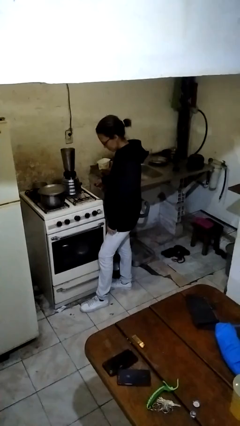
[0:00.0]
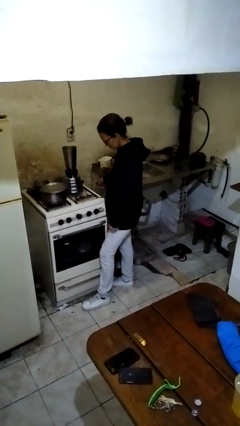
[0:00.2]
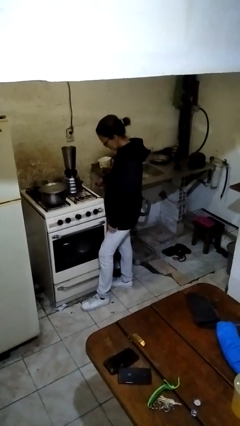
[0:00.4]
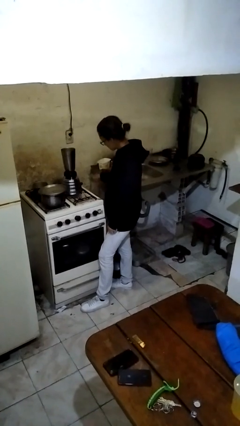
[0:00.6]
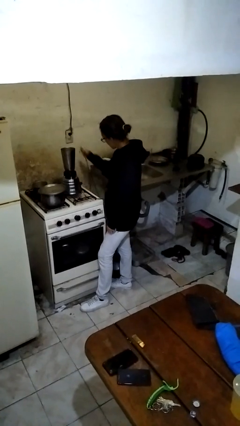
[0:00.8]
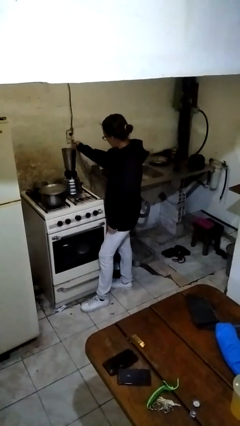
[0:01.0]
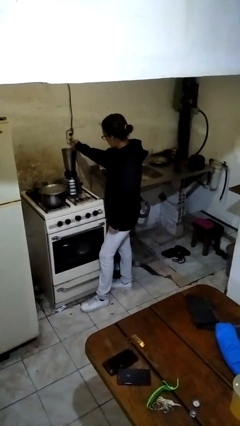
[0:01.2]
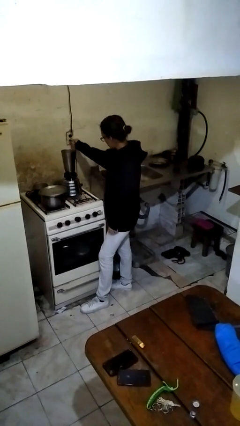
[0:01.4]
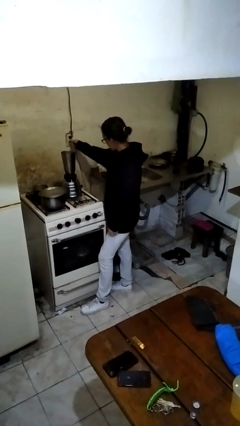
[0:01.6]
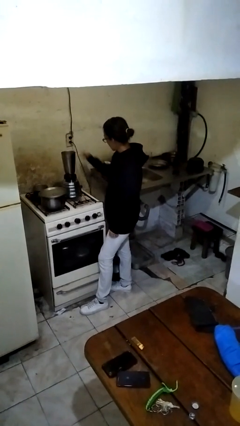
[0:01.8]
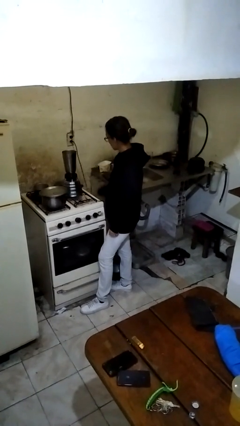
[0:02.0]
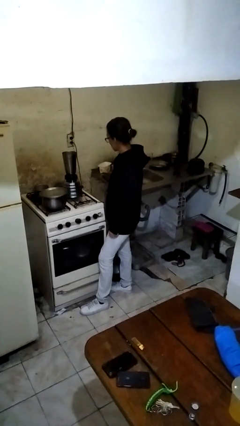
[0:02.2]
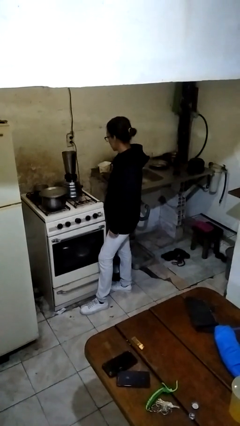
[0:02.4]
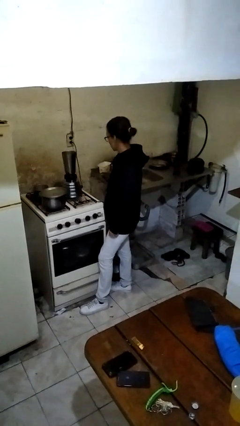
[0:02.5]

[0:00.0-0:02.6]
person plugs into electrical socket

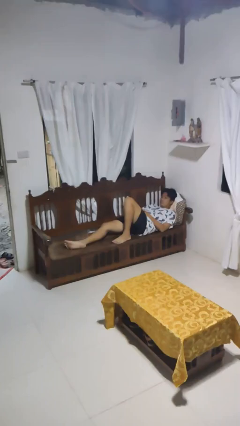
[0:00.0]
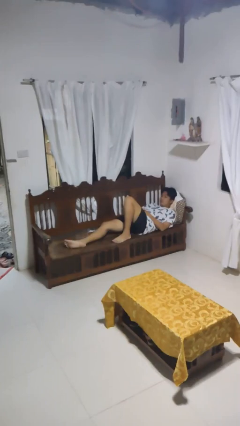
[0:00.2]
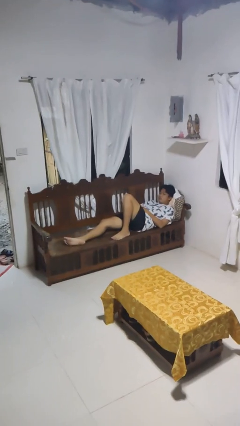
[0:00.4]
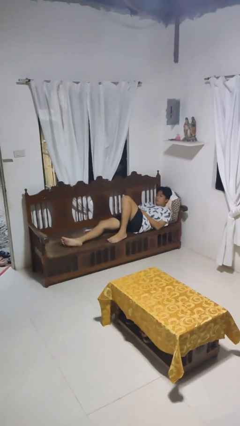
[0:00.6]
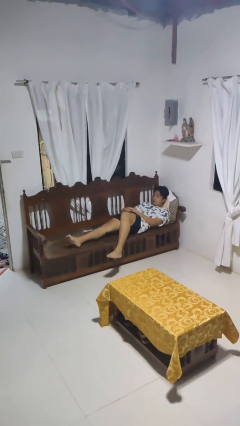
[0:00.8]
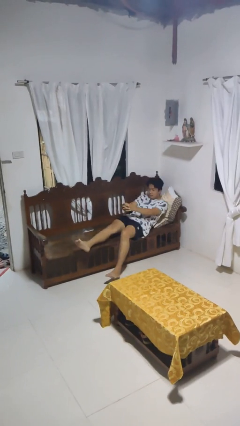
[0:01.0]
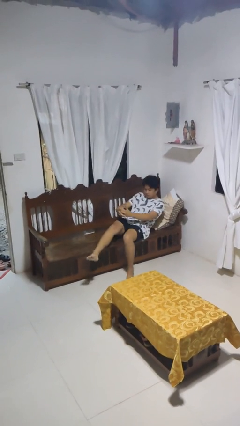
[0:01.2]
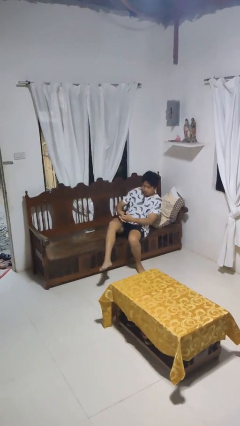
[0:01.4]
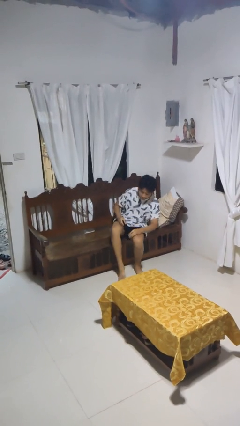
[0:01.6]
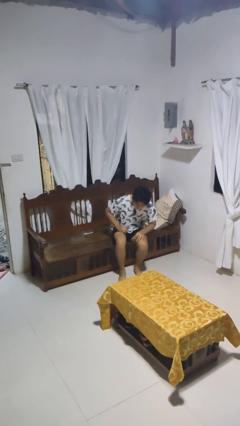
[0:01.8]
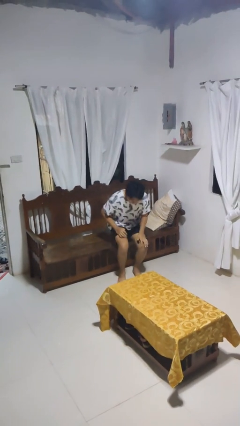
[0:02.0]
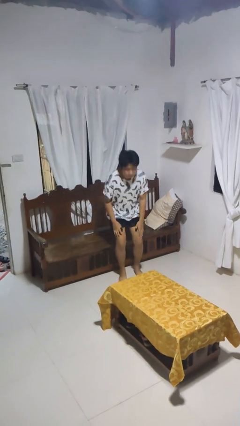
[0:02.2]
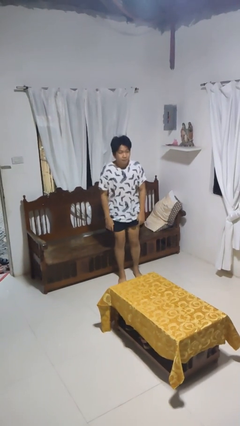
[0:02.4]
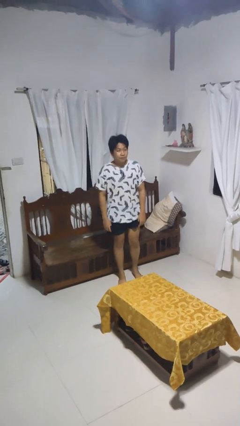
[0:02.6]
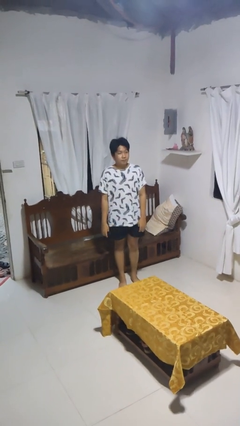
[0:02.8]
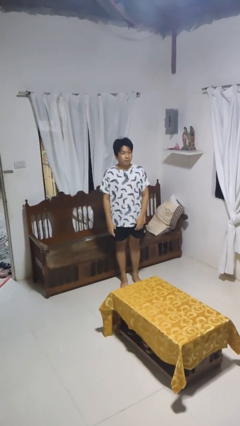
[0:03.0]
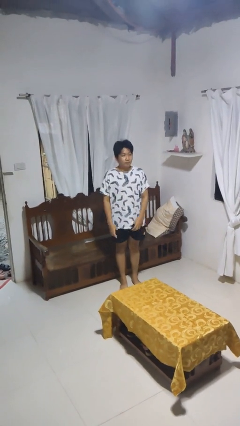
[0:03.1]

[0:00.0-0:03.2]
person stands up

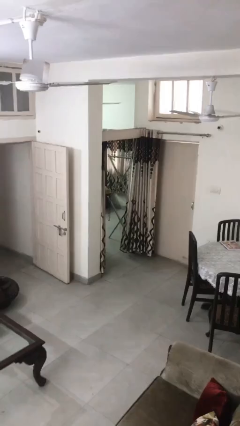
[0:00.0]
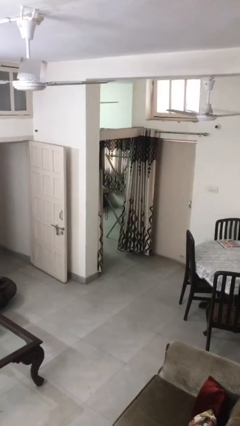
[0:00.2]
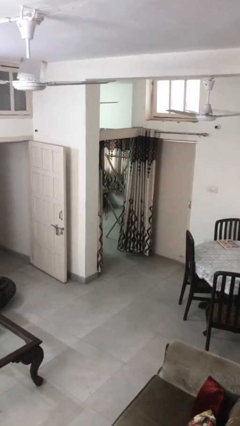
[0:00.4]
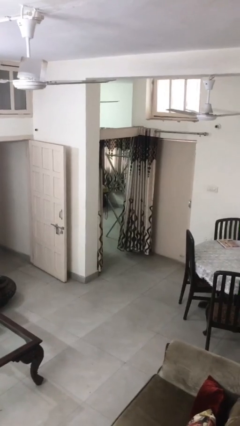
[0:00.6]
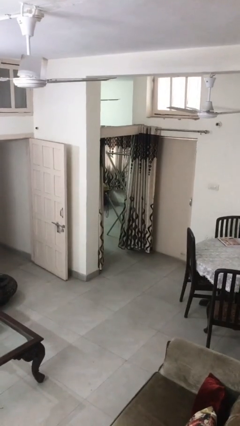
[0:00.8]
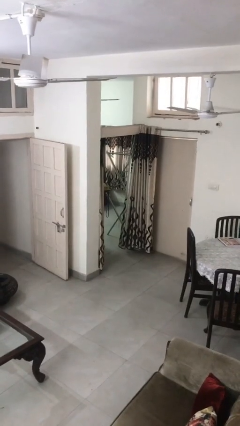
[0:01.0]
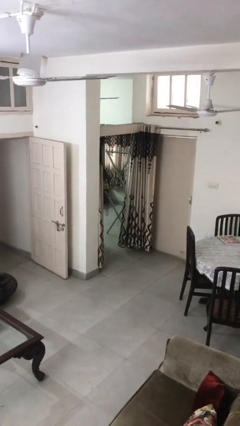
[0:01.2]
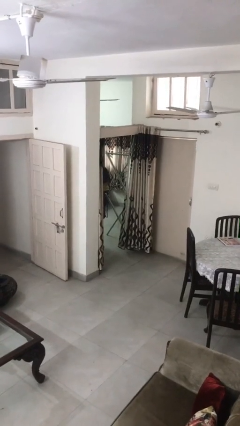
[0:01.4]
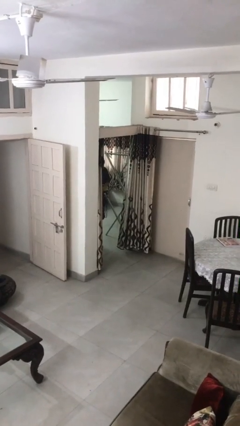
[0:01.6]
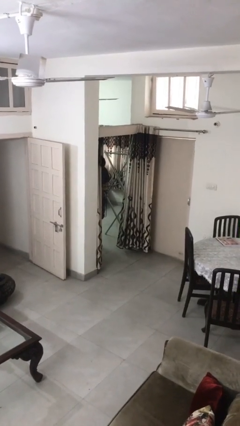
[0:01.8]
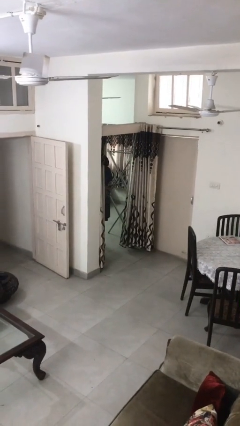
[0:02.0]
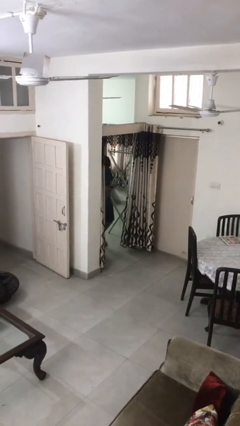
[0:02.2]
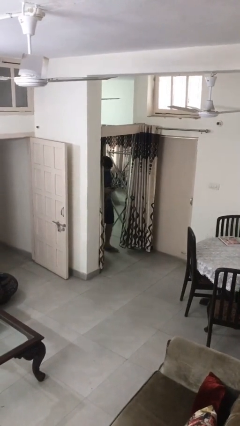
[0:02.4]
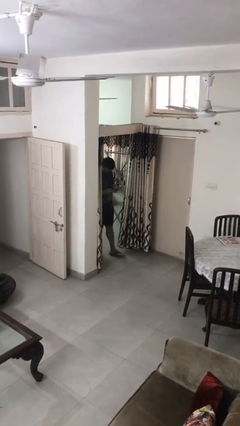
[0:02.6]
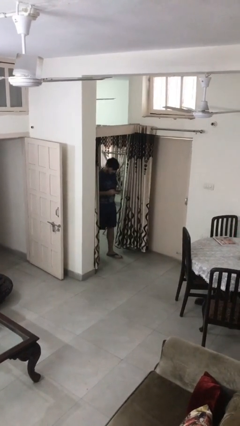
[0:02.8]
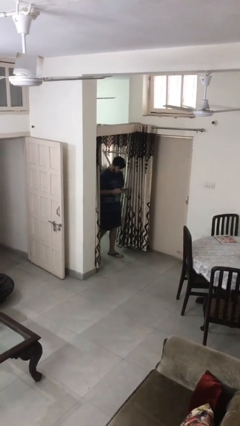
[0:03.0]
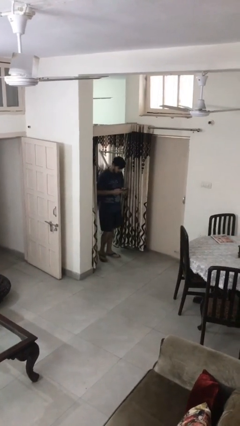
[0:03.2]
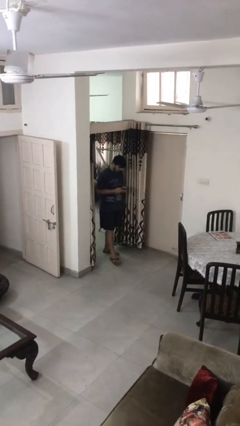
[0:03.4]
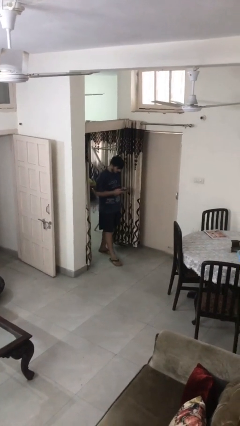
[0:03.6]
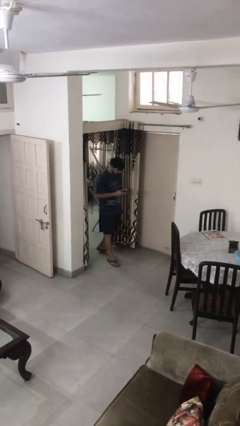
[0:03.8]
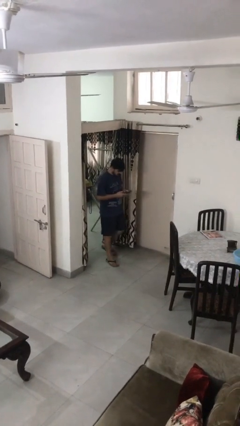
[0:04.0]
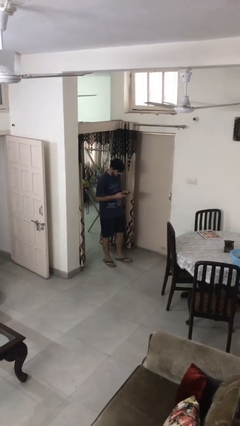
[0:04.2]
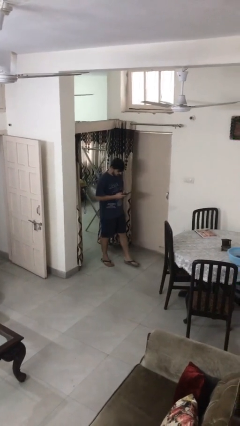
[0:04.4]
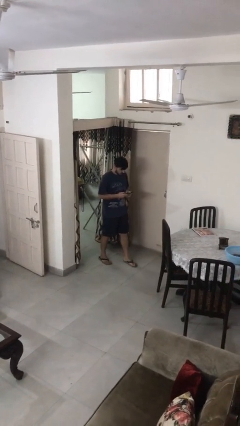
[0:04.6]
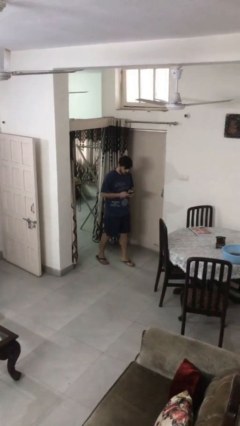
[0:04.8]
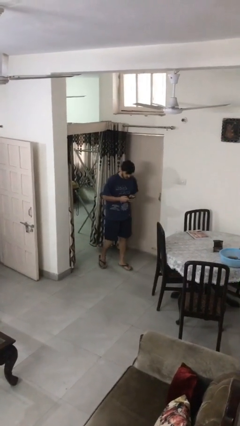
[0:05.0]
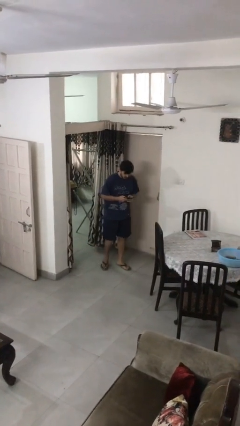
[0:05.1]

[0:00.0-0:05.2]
person enters scene through structure

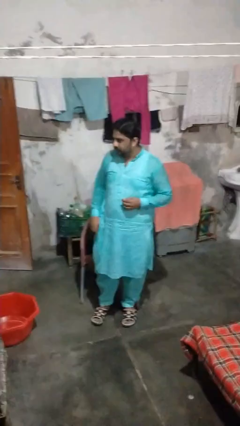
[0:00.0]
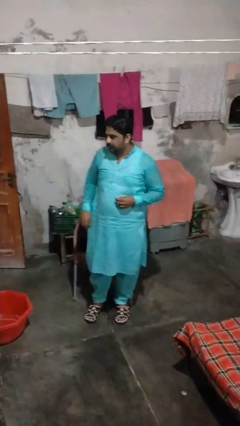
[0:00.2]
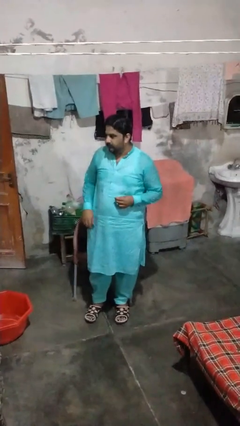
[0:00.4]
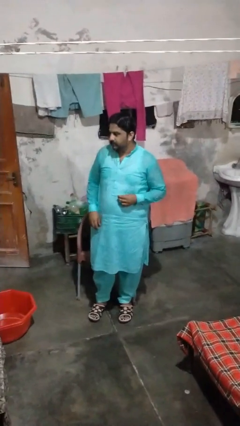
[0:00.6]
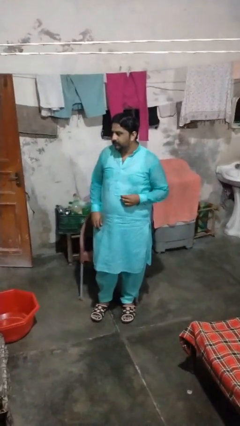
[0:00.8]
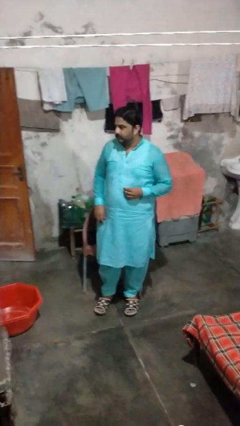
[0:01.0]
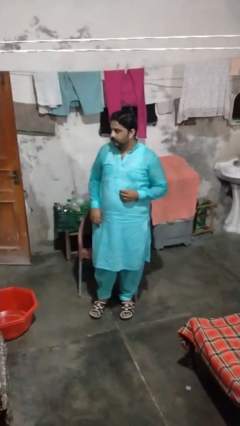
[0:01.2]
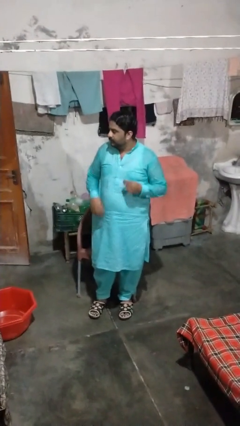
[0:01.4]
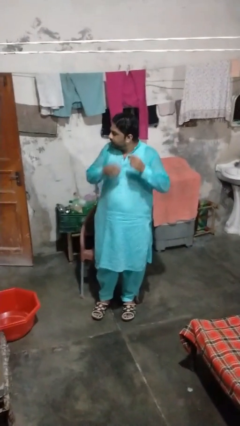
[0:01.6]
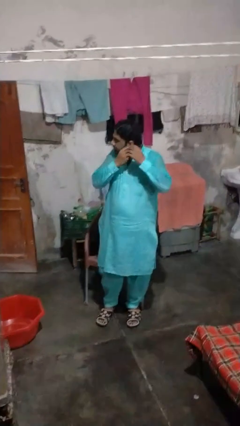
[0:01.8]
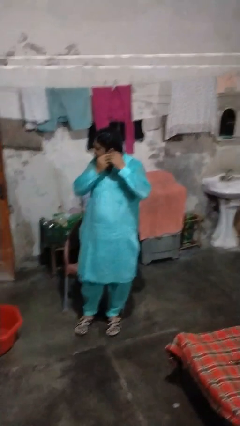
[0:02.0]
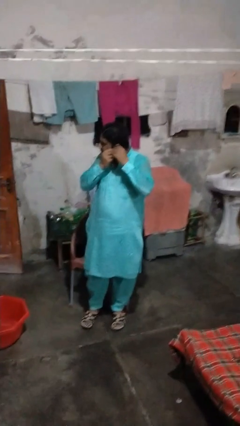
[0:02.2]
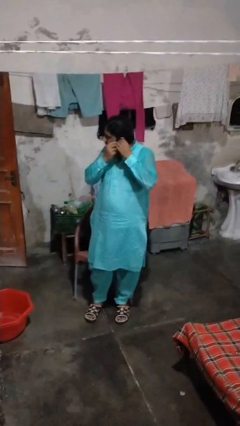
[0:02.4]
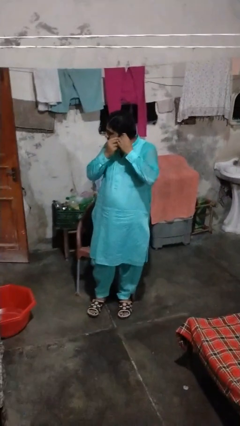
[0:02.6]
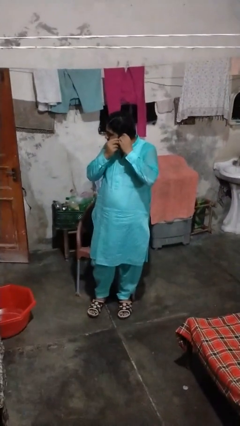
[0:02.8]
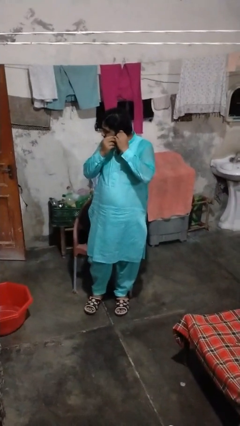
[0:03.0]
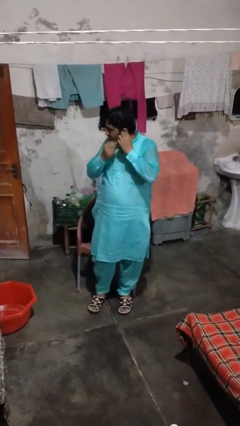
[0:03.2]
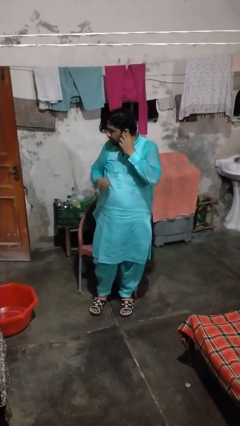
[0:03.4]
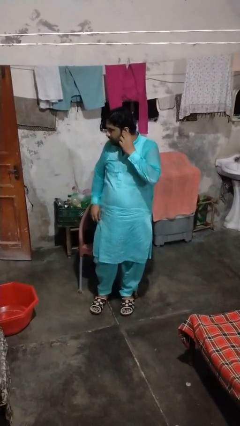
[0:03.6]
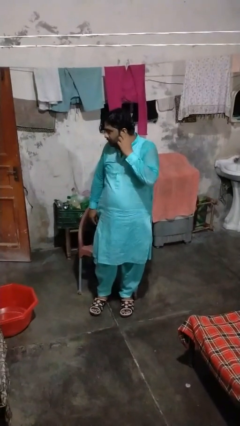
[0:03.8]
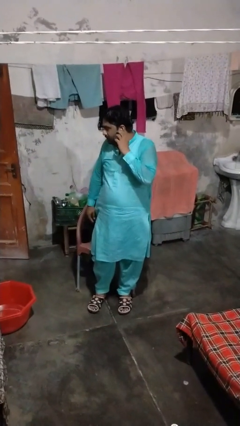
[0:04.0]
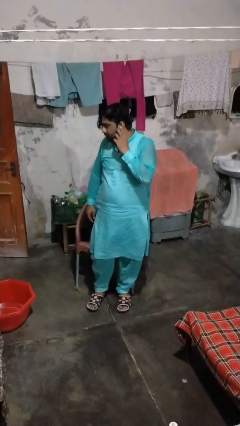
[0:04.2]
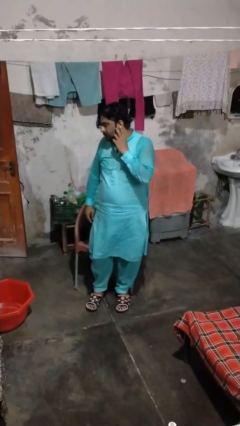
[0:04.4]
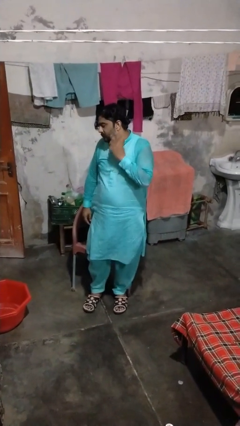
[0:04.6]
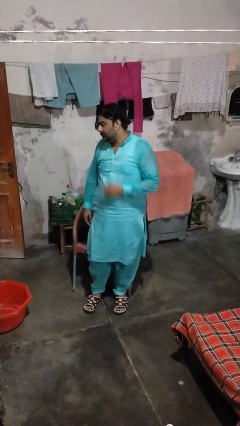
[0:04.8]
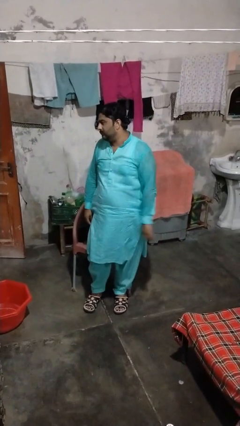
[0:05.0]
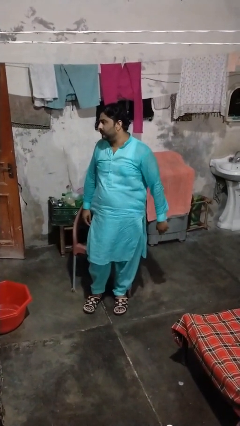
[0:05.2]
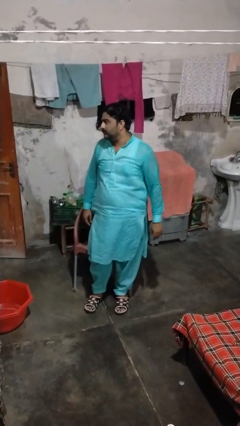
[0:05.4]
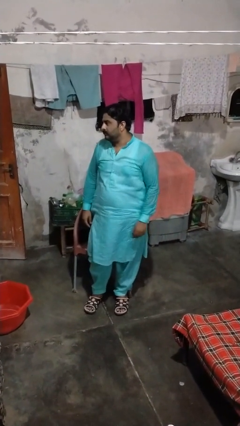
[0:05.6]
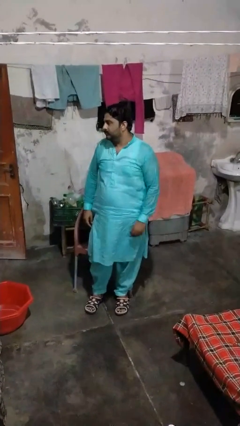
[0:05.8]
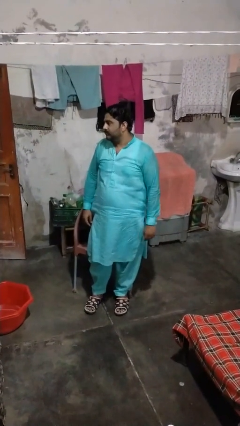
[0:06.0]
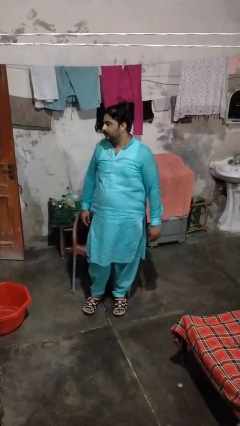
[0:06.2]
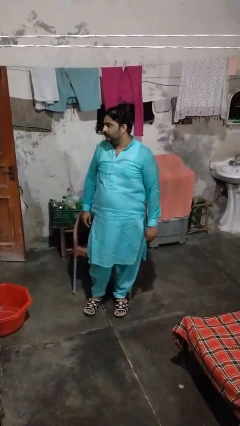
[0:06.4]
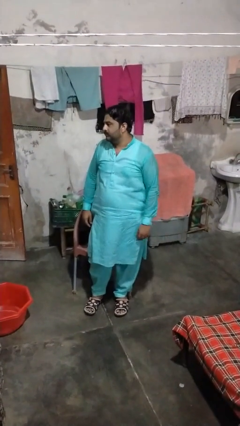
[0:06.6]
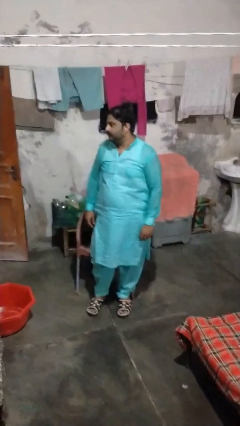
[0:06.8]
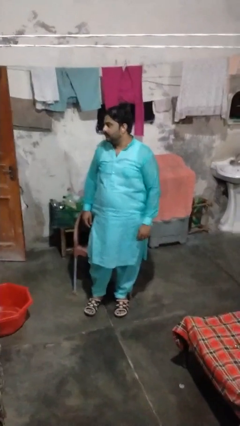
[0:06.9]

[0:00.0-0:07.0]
person puts on earrings
